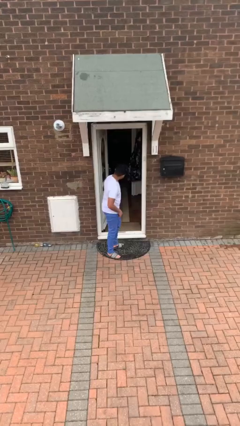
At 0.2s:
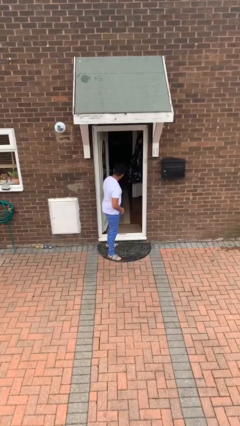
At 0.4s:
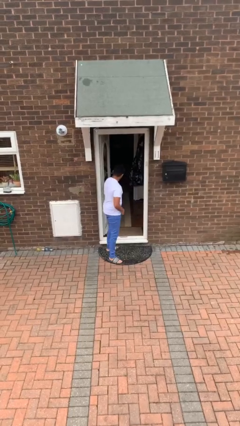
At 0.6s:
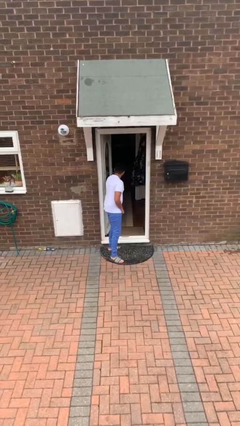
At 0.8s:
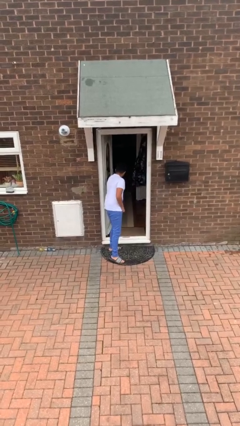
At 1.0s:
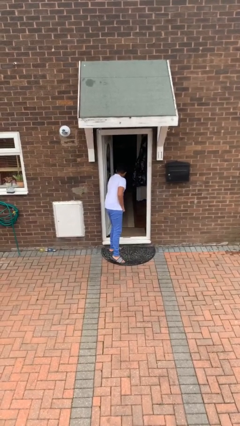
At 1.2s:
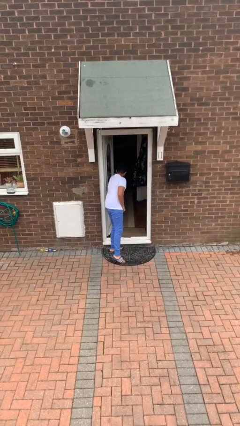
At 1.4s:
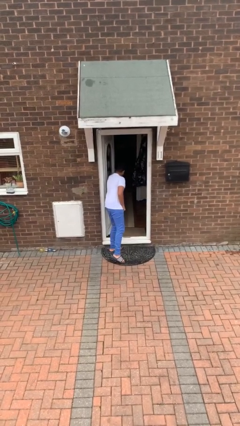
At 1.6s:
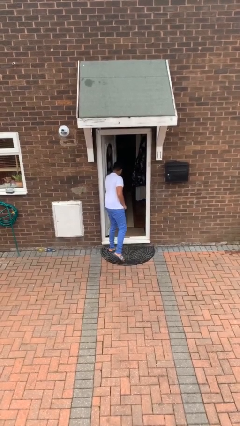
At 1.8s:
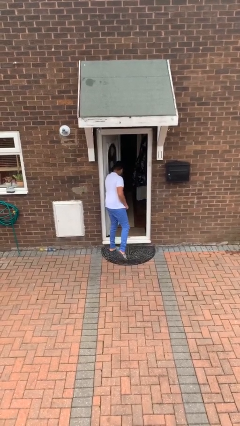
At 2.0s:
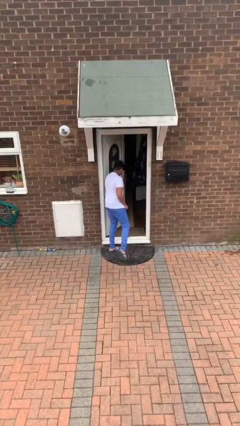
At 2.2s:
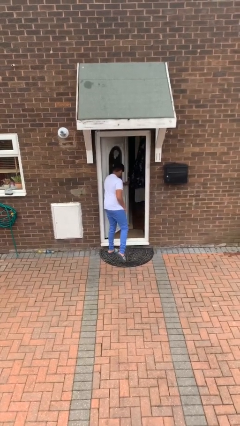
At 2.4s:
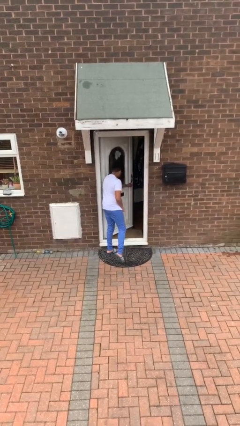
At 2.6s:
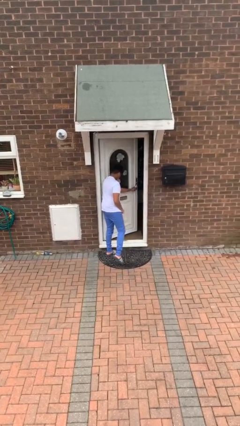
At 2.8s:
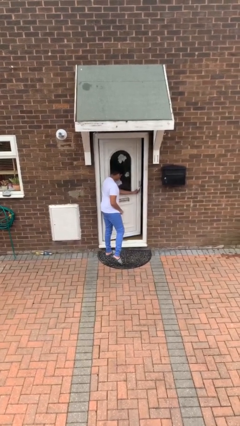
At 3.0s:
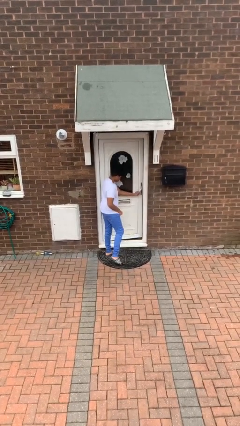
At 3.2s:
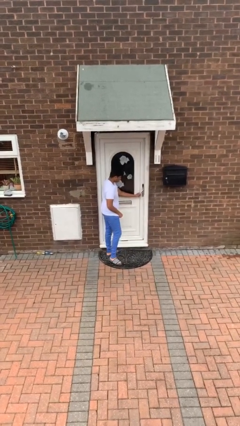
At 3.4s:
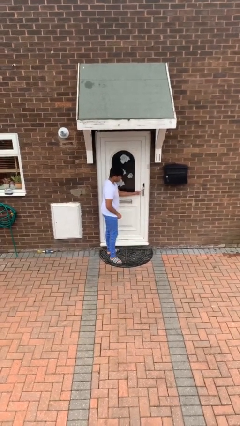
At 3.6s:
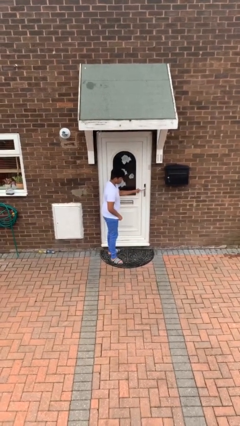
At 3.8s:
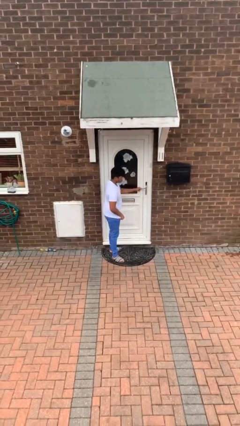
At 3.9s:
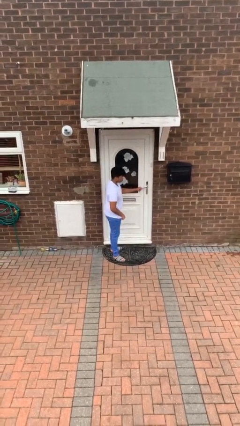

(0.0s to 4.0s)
person closes facility door

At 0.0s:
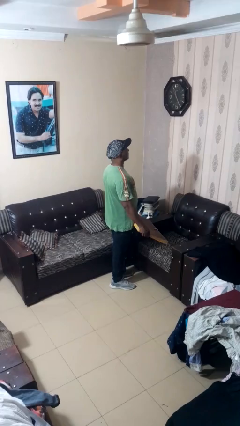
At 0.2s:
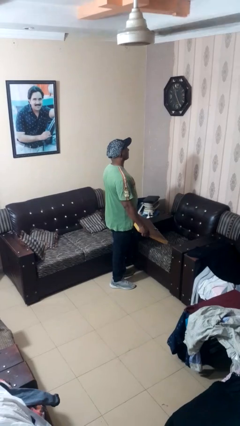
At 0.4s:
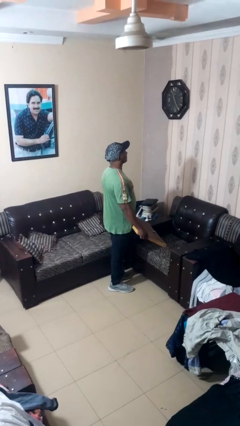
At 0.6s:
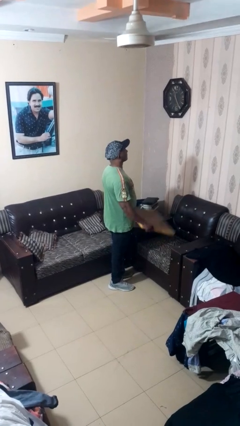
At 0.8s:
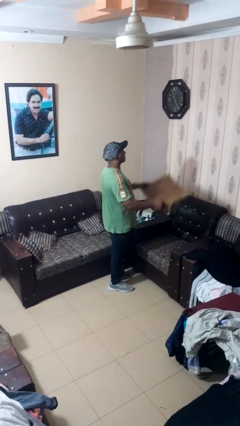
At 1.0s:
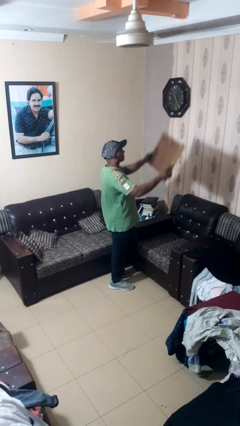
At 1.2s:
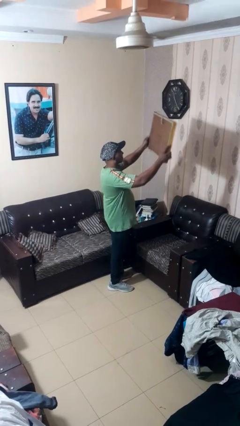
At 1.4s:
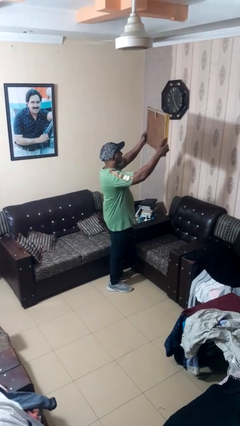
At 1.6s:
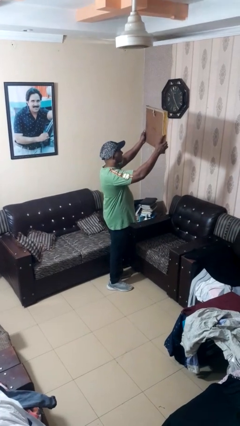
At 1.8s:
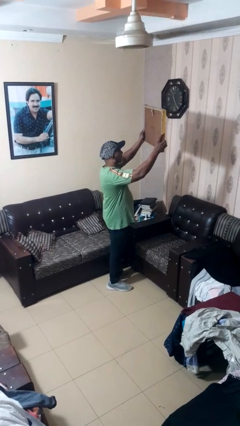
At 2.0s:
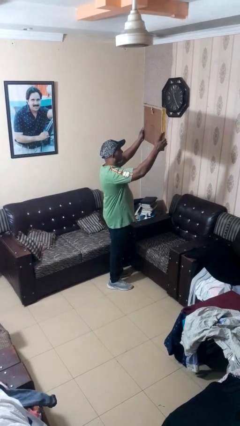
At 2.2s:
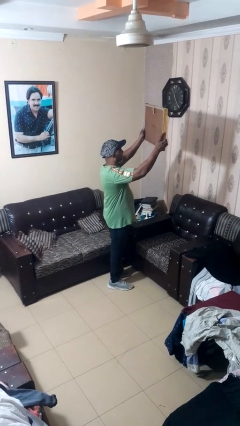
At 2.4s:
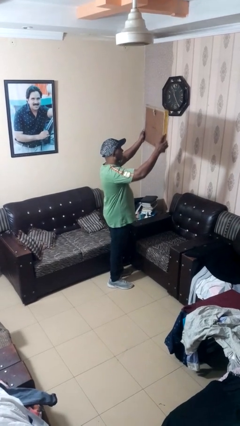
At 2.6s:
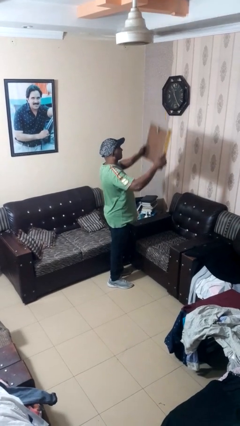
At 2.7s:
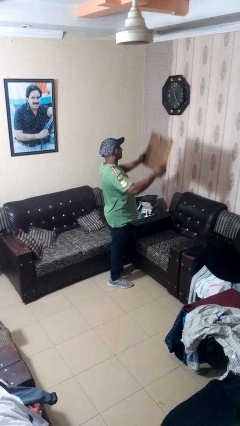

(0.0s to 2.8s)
person holds object above head

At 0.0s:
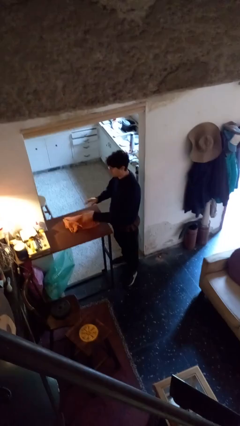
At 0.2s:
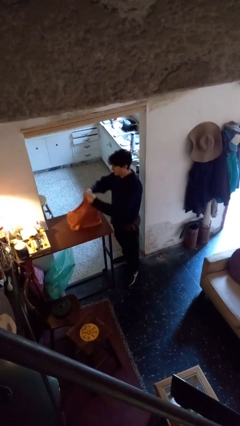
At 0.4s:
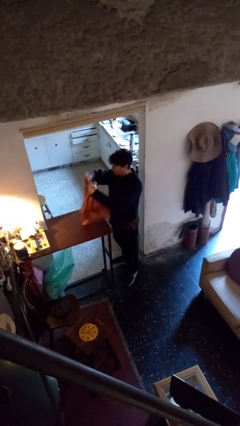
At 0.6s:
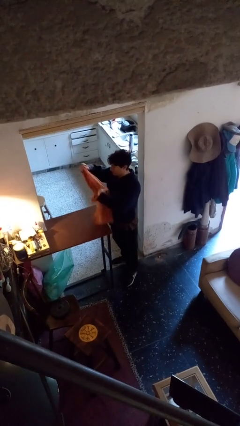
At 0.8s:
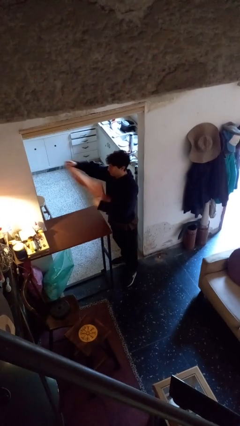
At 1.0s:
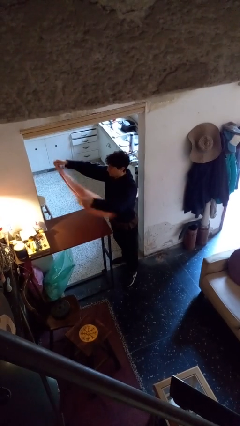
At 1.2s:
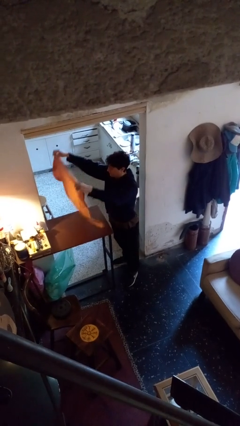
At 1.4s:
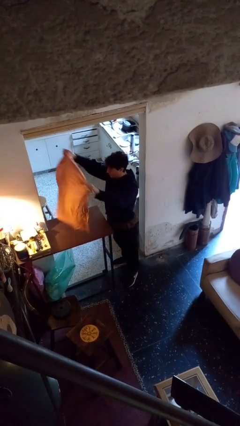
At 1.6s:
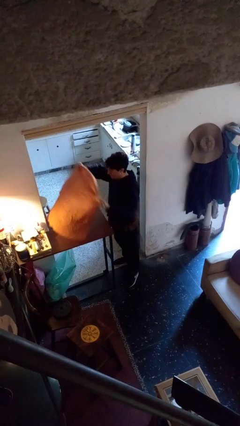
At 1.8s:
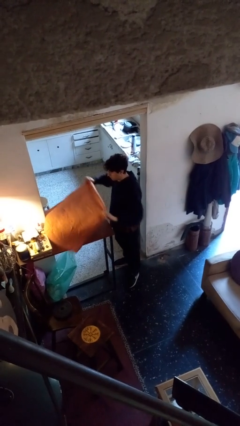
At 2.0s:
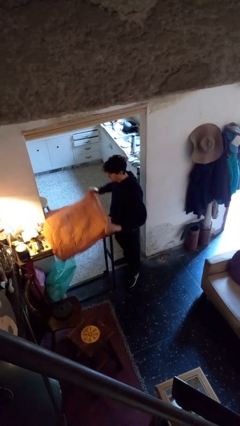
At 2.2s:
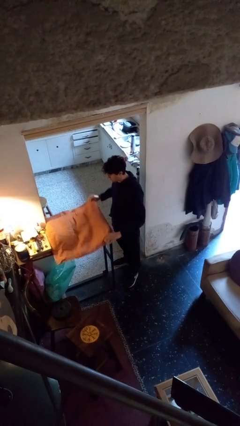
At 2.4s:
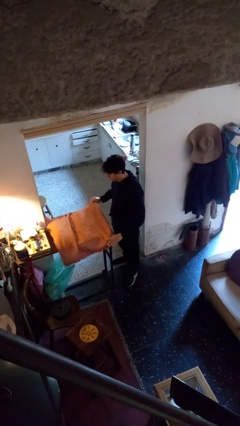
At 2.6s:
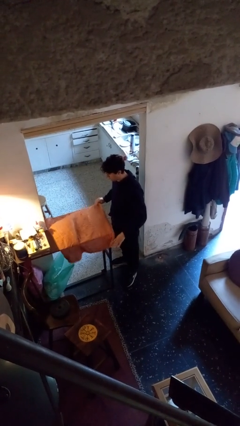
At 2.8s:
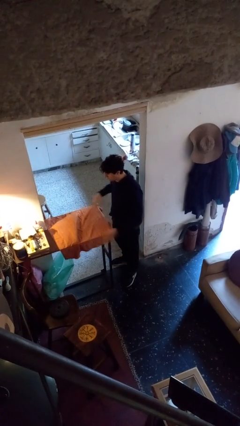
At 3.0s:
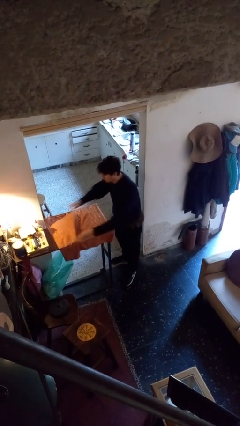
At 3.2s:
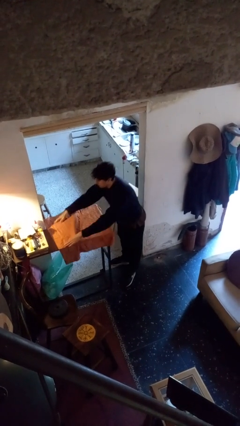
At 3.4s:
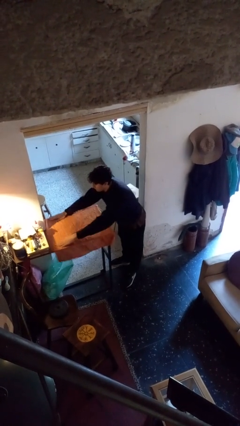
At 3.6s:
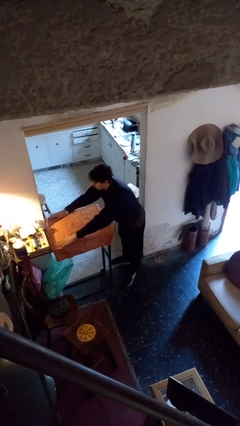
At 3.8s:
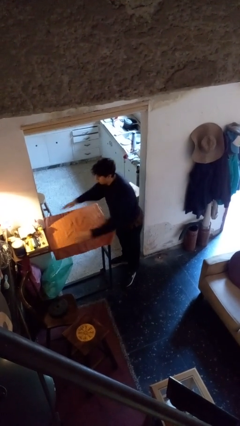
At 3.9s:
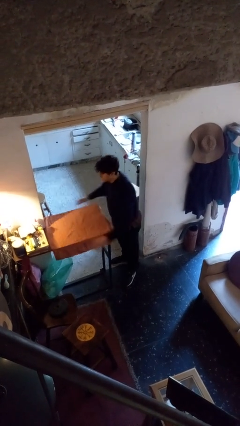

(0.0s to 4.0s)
person spreads tablecloth

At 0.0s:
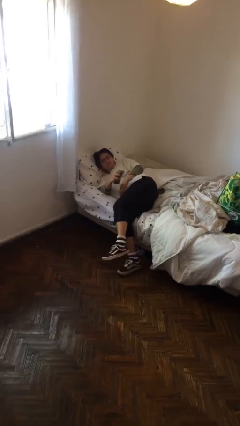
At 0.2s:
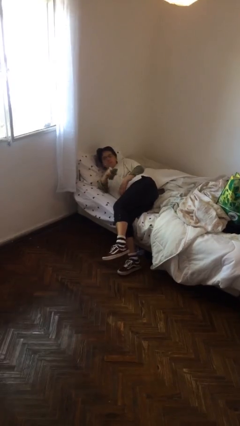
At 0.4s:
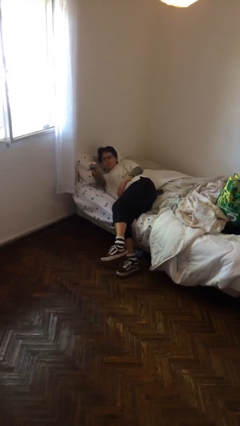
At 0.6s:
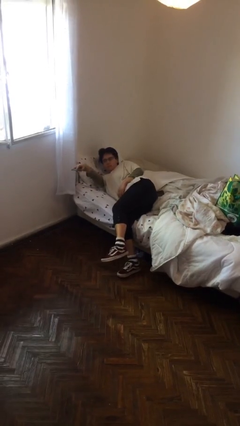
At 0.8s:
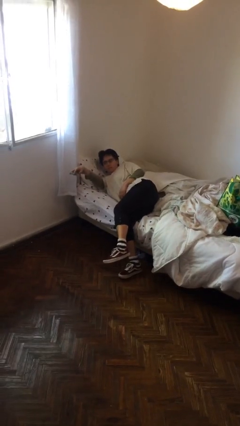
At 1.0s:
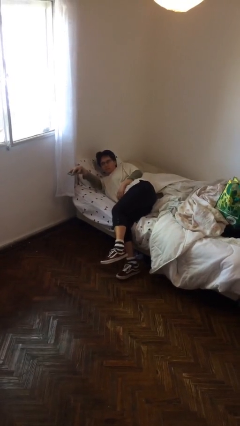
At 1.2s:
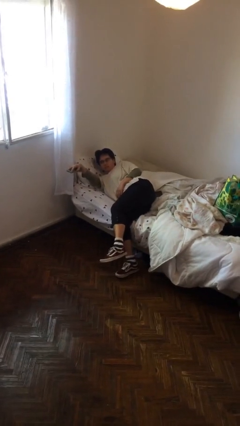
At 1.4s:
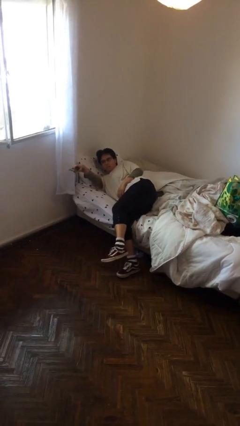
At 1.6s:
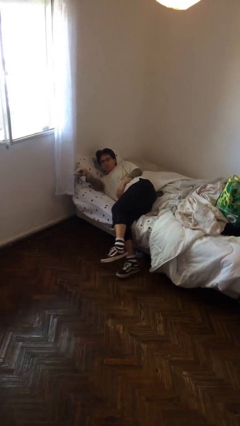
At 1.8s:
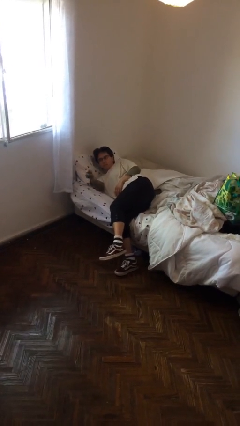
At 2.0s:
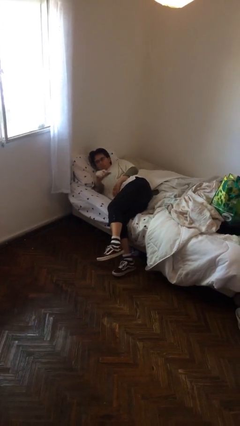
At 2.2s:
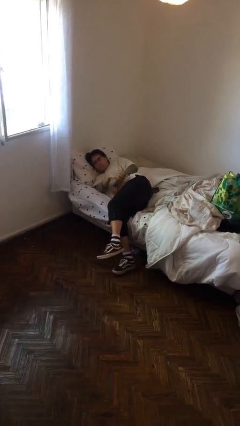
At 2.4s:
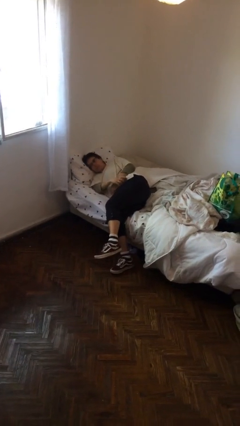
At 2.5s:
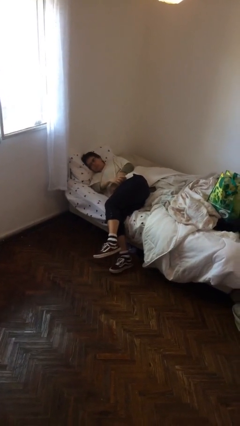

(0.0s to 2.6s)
person uses television remote

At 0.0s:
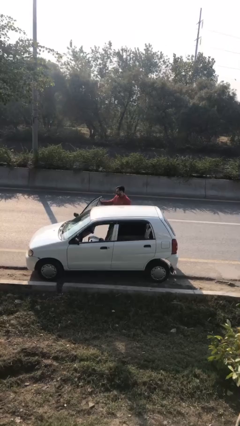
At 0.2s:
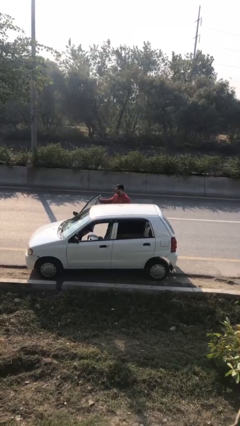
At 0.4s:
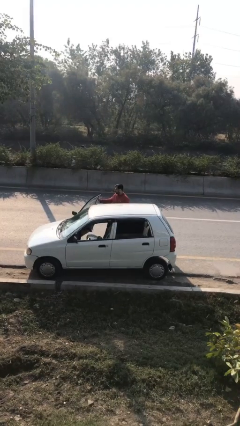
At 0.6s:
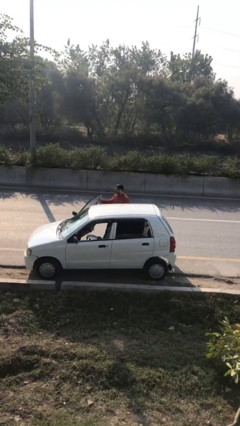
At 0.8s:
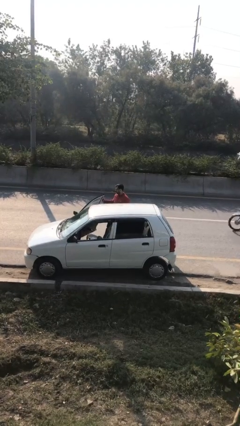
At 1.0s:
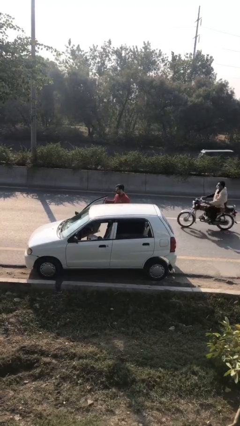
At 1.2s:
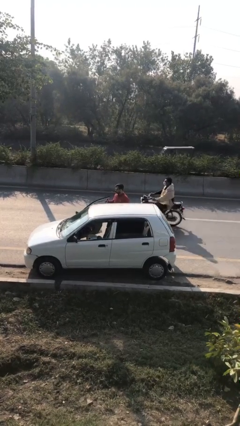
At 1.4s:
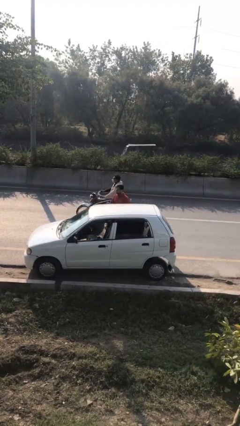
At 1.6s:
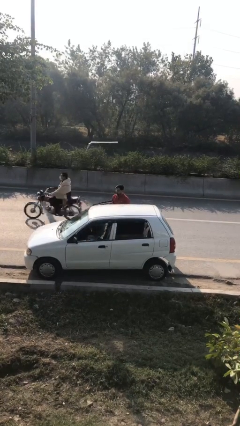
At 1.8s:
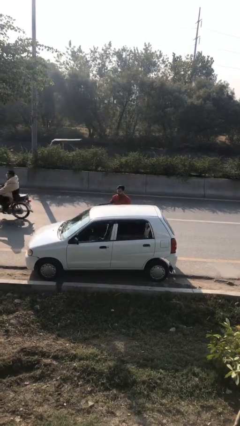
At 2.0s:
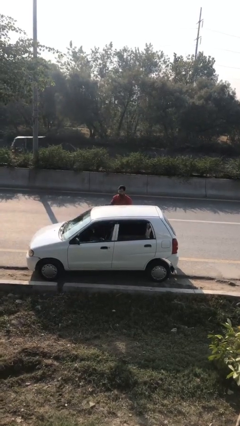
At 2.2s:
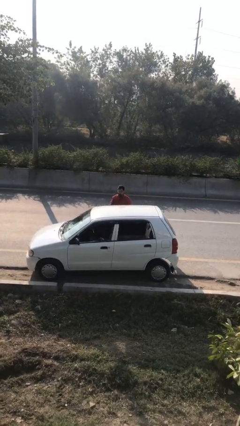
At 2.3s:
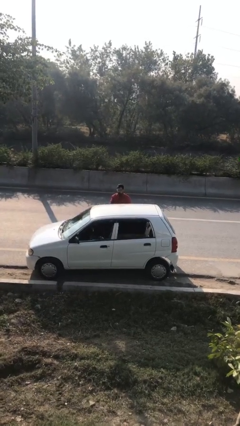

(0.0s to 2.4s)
person closes car door

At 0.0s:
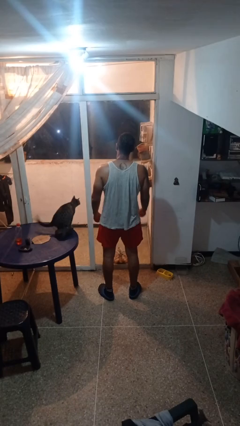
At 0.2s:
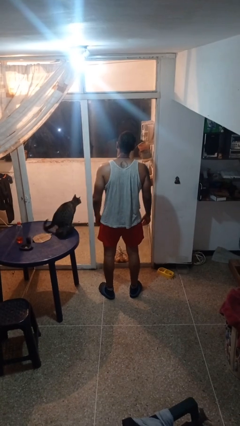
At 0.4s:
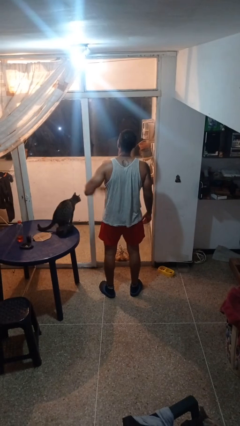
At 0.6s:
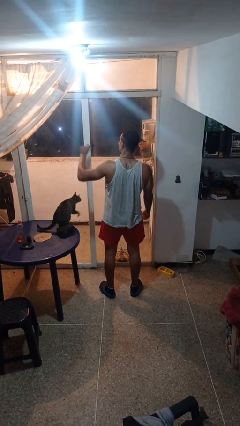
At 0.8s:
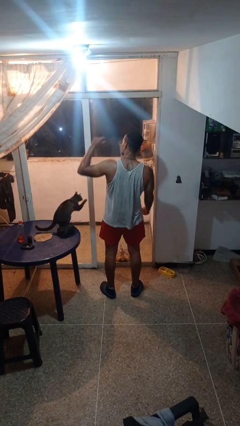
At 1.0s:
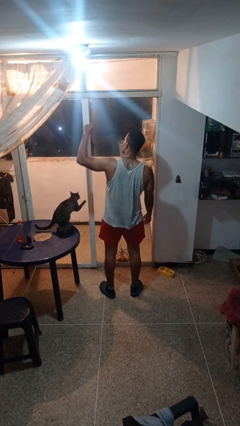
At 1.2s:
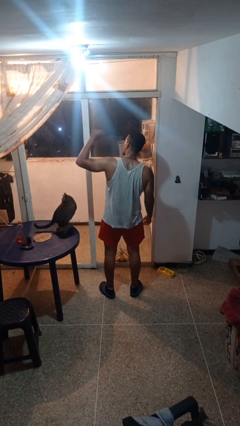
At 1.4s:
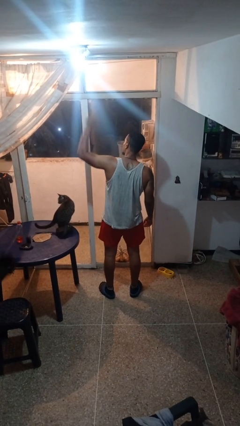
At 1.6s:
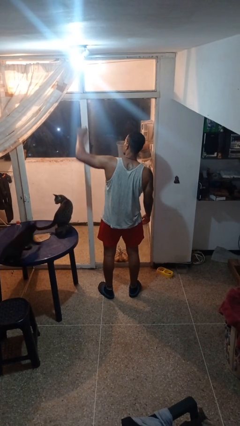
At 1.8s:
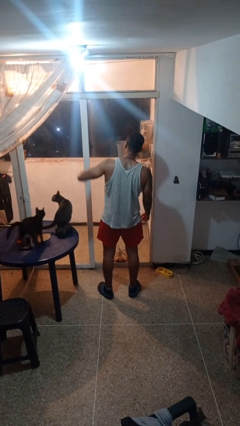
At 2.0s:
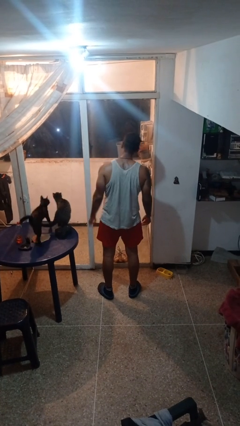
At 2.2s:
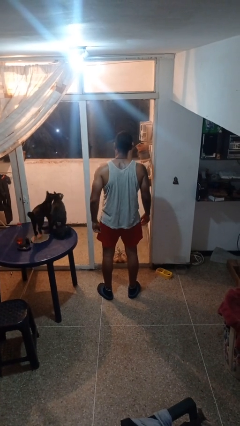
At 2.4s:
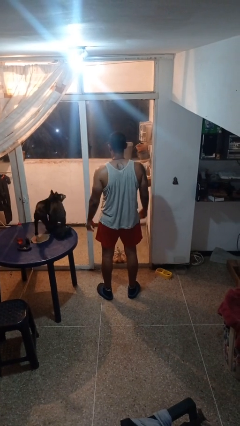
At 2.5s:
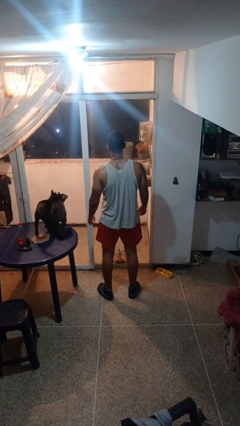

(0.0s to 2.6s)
person snaps fingers
